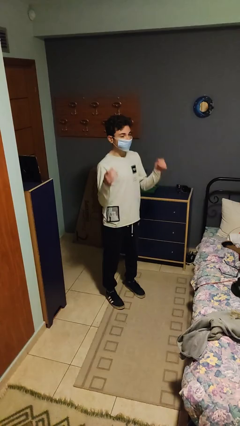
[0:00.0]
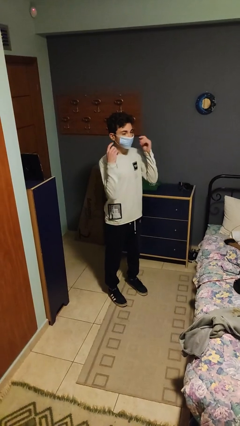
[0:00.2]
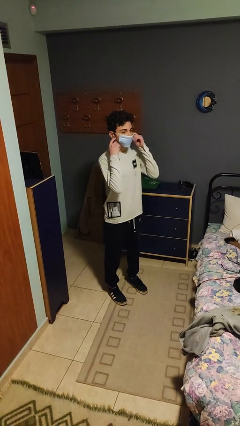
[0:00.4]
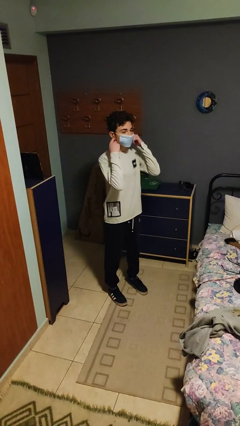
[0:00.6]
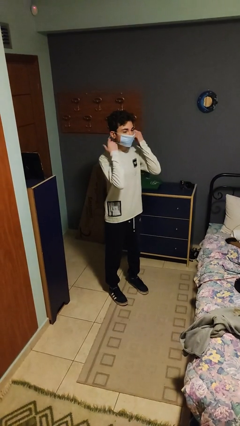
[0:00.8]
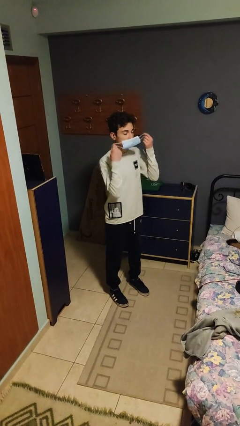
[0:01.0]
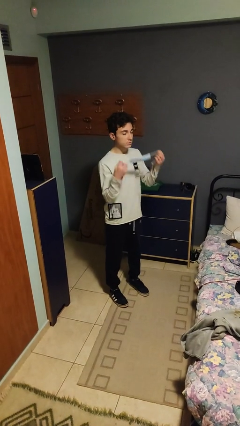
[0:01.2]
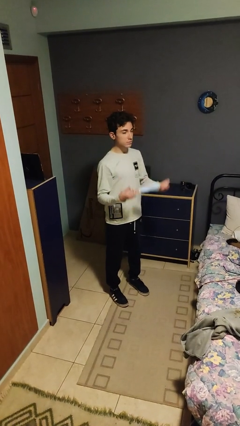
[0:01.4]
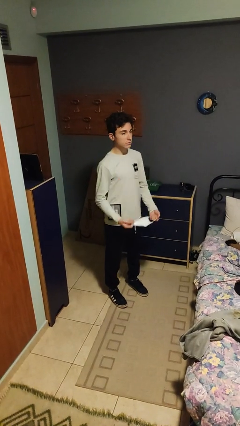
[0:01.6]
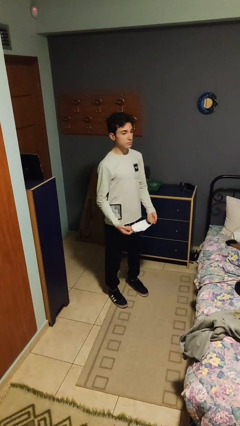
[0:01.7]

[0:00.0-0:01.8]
person takes off facemask

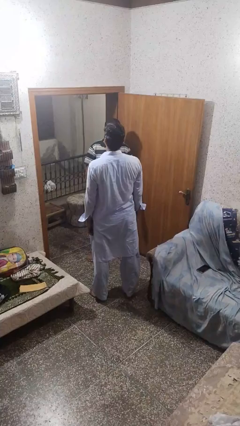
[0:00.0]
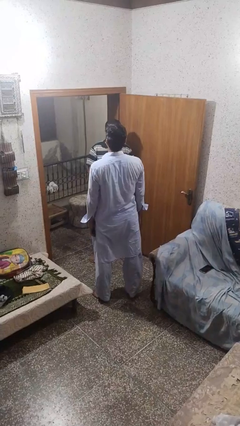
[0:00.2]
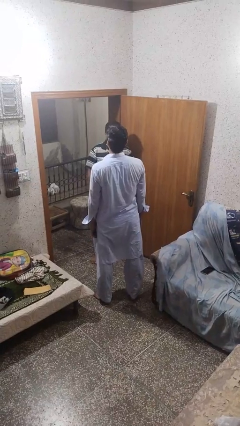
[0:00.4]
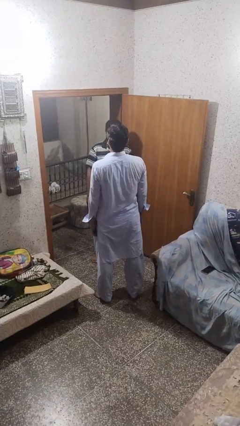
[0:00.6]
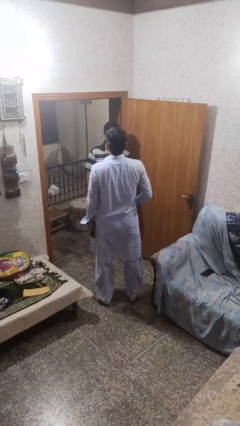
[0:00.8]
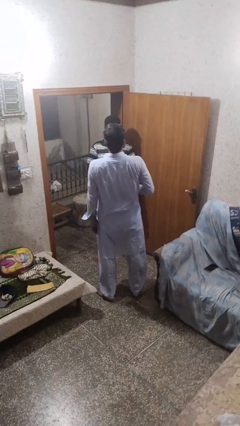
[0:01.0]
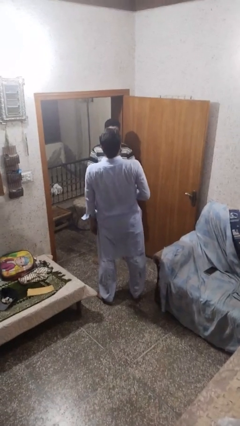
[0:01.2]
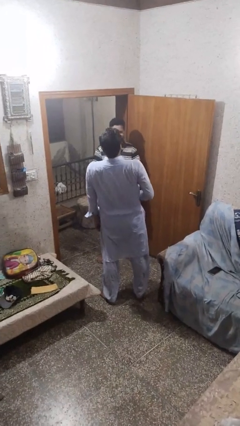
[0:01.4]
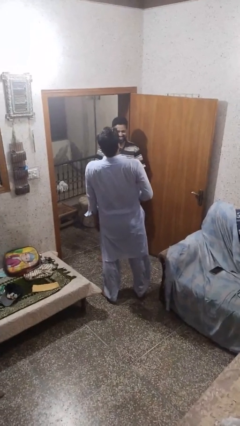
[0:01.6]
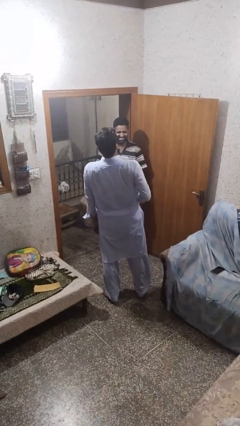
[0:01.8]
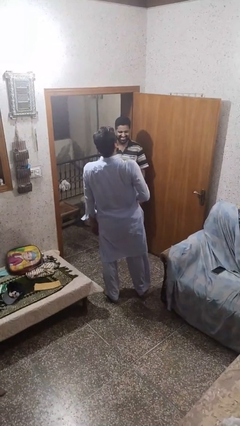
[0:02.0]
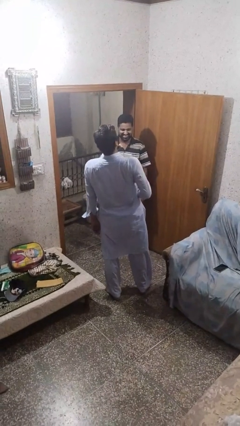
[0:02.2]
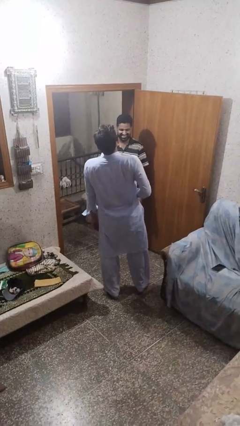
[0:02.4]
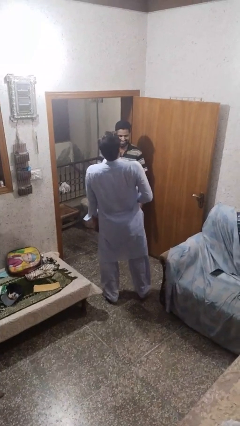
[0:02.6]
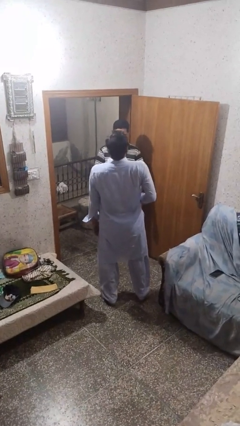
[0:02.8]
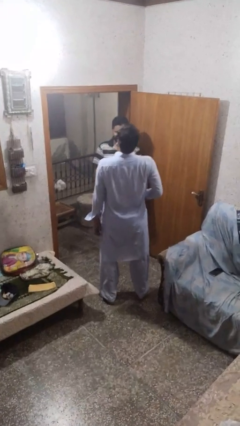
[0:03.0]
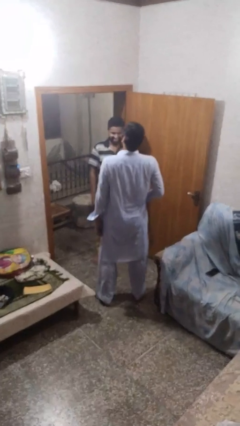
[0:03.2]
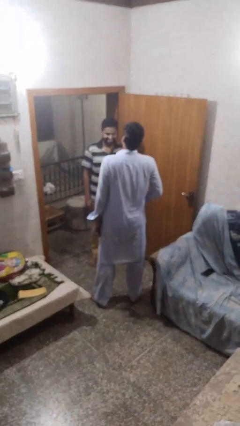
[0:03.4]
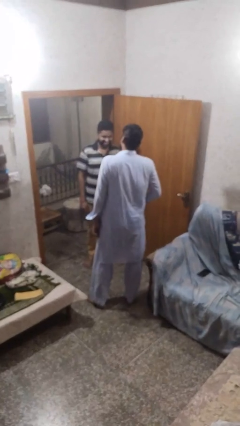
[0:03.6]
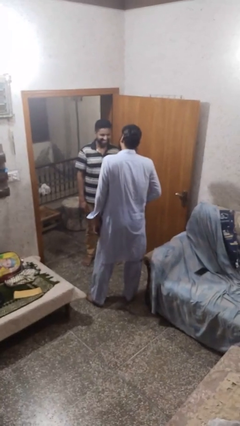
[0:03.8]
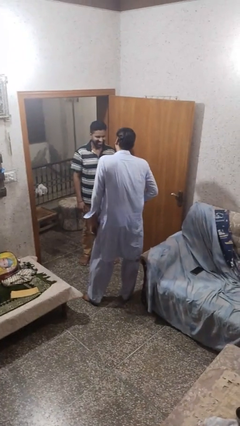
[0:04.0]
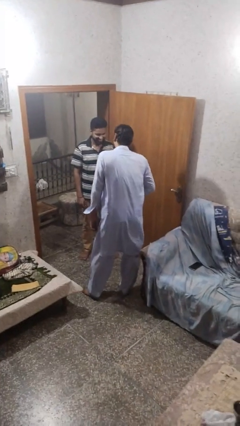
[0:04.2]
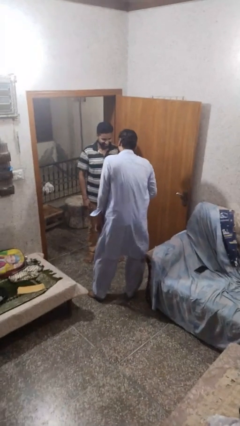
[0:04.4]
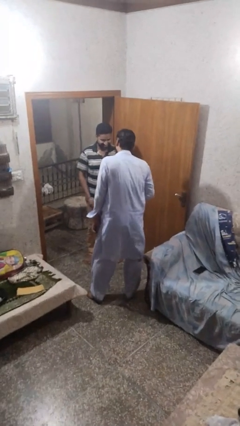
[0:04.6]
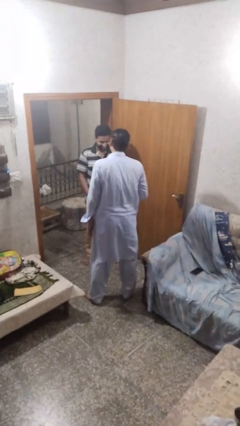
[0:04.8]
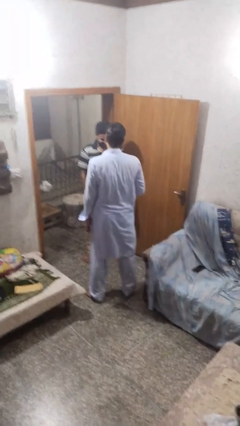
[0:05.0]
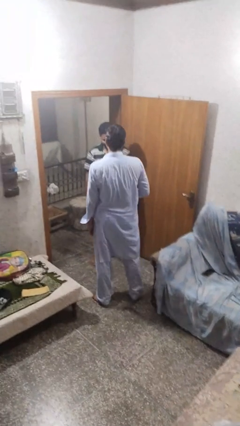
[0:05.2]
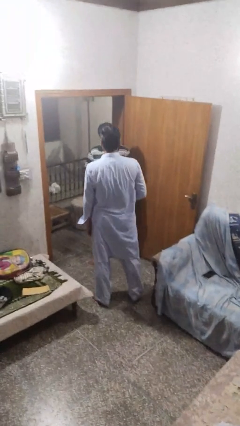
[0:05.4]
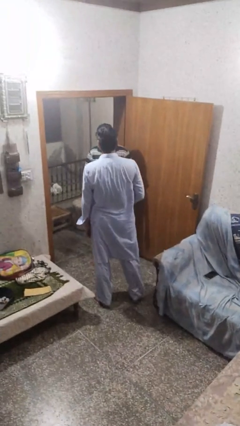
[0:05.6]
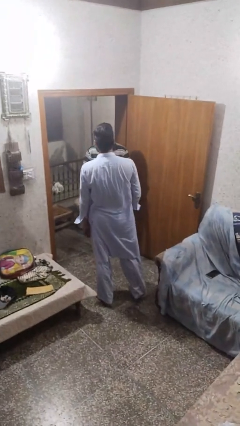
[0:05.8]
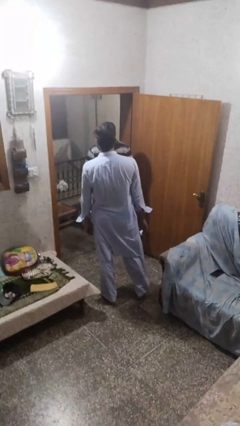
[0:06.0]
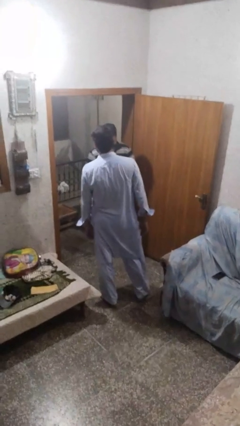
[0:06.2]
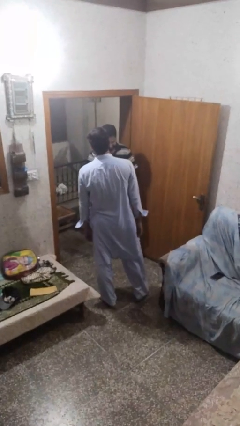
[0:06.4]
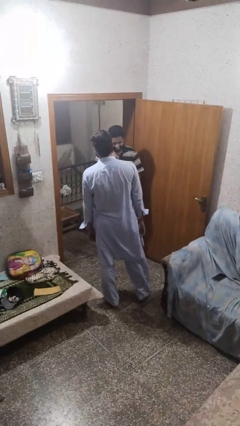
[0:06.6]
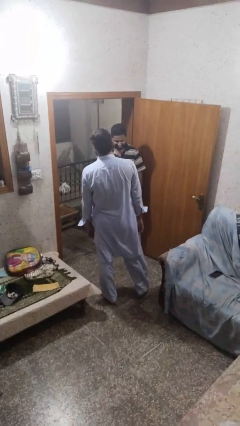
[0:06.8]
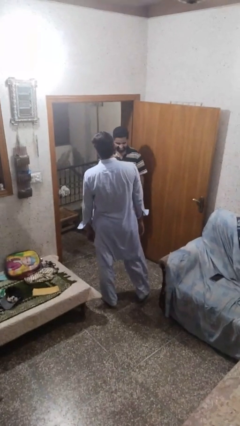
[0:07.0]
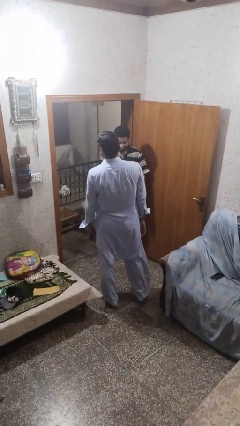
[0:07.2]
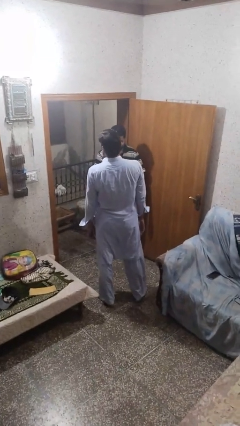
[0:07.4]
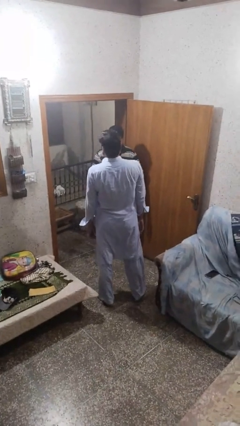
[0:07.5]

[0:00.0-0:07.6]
person laughs with person

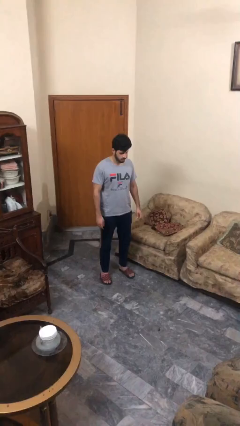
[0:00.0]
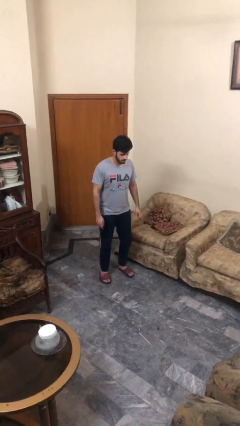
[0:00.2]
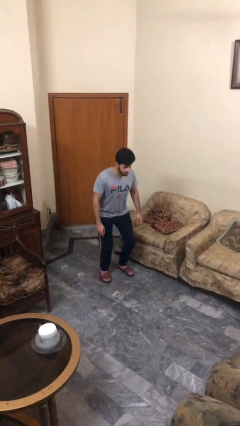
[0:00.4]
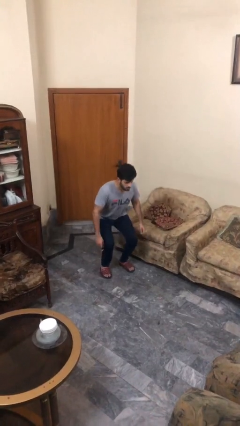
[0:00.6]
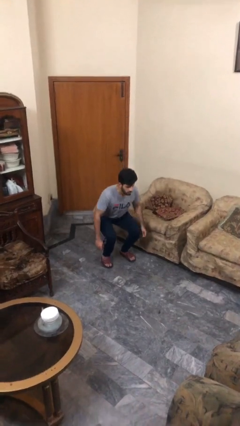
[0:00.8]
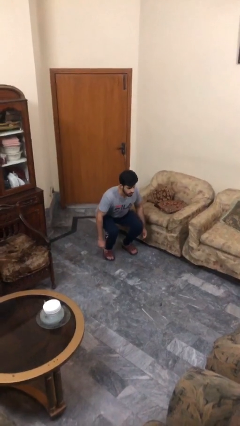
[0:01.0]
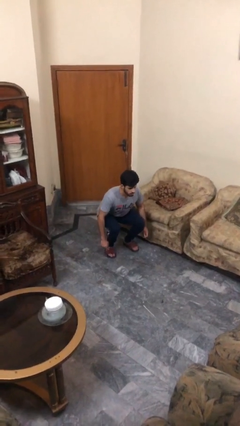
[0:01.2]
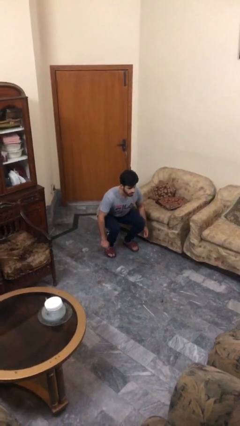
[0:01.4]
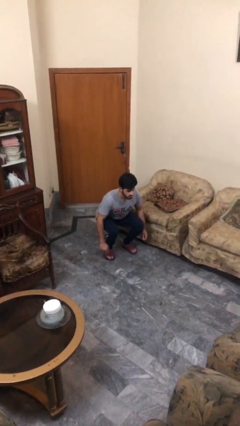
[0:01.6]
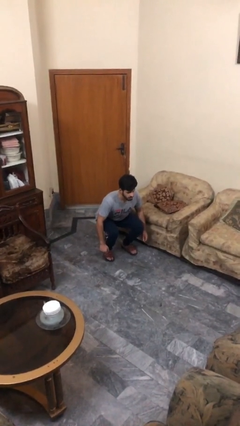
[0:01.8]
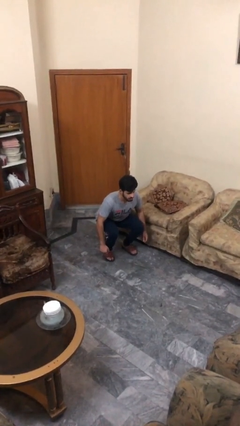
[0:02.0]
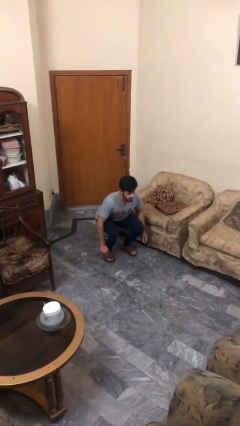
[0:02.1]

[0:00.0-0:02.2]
person squats

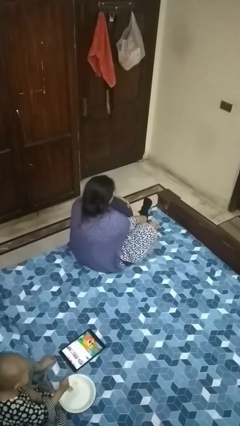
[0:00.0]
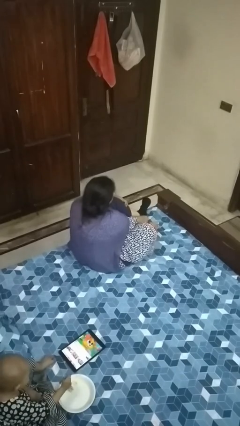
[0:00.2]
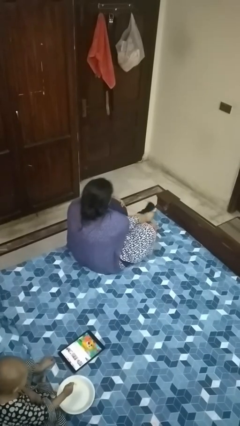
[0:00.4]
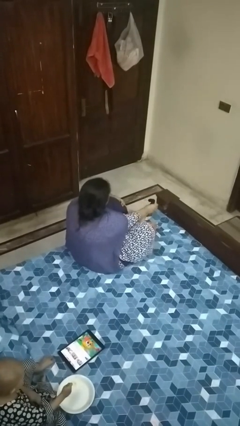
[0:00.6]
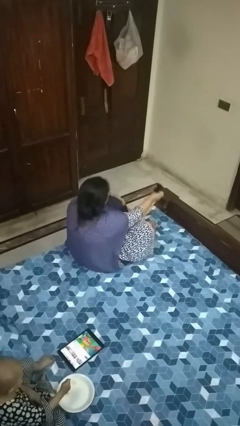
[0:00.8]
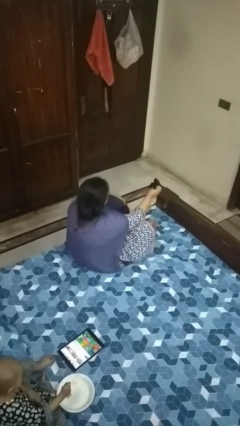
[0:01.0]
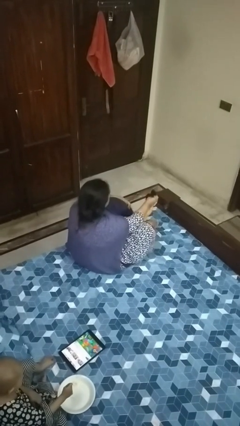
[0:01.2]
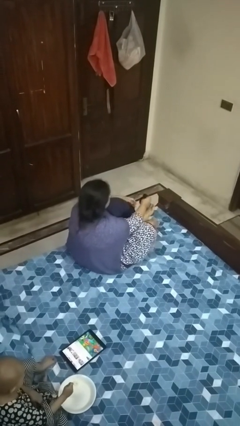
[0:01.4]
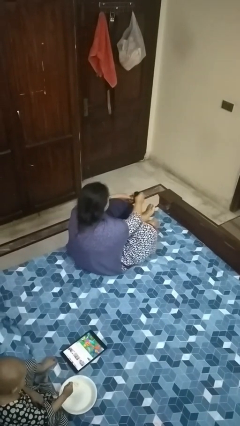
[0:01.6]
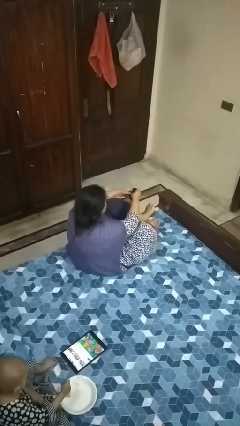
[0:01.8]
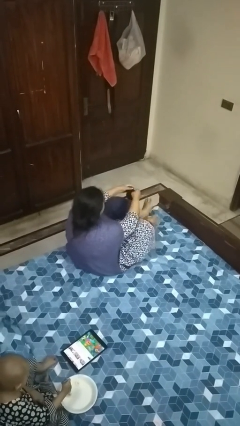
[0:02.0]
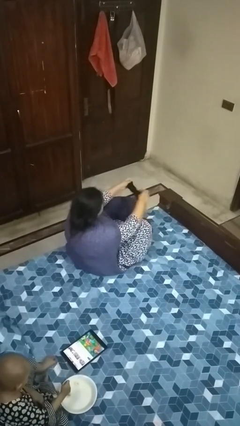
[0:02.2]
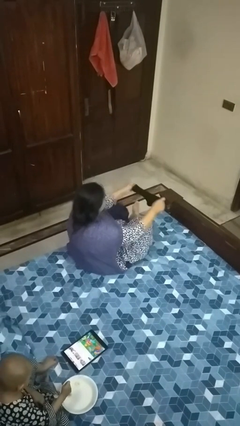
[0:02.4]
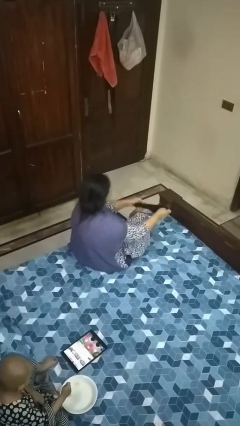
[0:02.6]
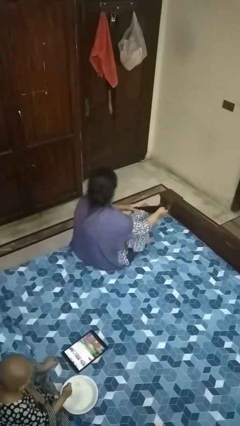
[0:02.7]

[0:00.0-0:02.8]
person takes off socks

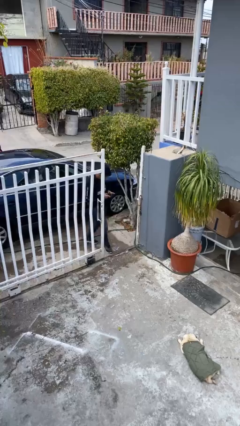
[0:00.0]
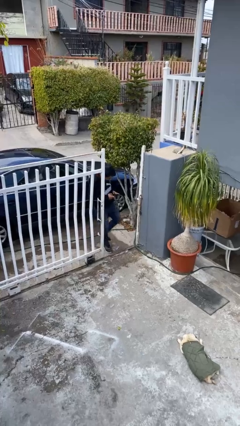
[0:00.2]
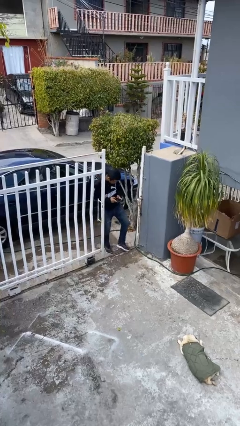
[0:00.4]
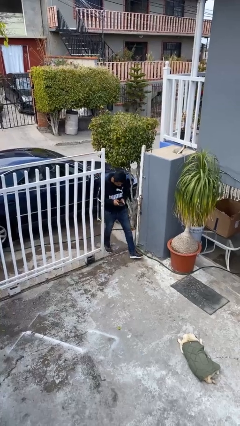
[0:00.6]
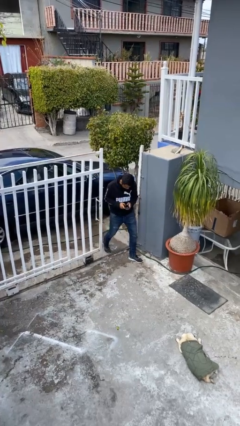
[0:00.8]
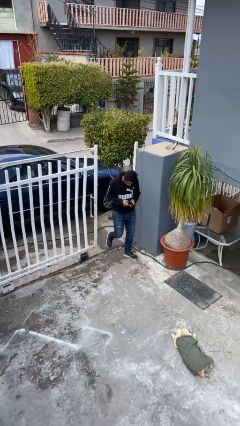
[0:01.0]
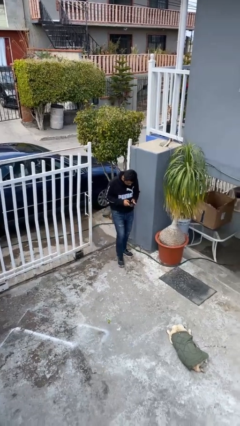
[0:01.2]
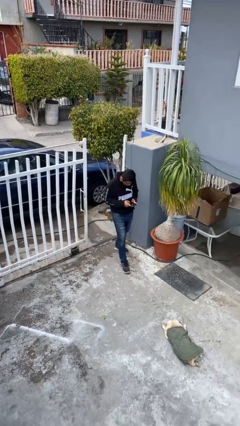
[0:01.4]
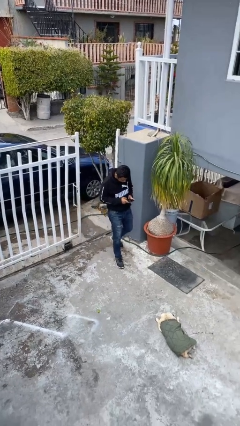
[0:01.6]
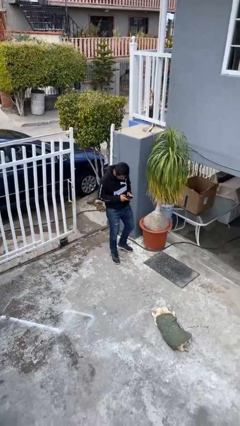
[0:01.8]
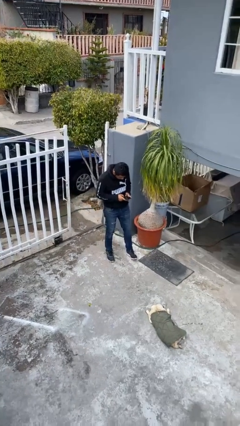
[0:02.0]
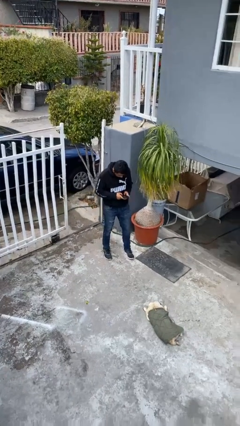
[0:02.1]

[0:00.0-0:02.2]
person enters scene through structure

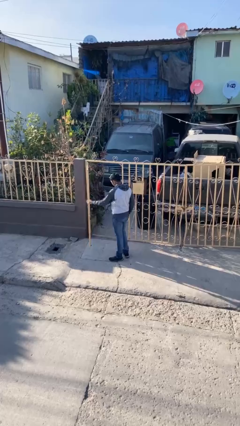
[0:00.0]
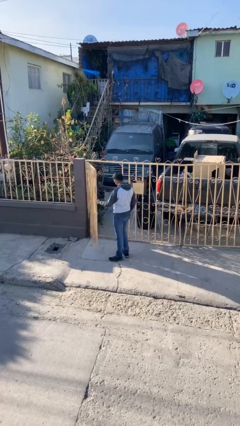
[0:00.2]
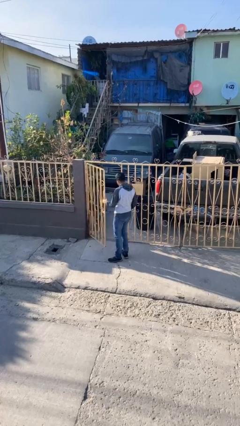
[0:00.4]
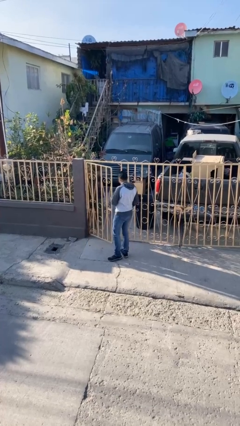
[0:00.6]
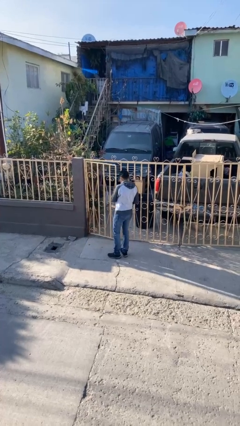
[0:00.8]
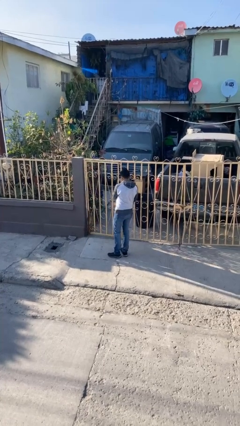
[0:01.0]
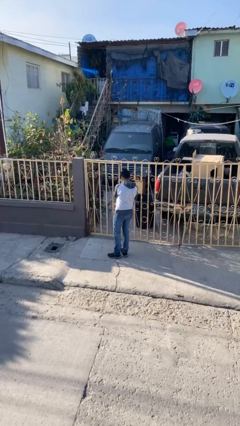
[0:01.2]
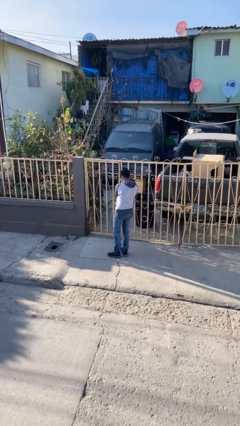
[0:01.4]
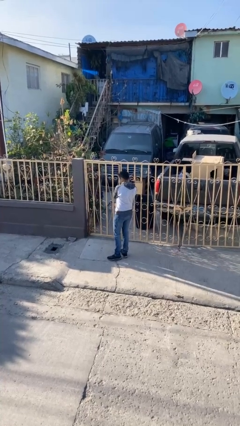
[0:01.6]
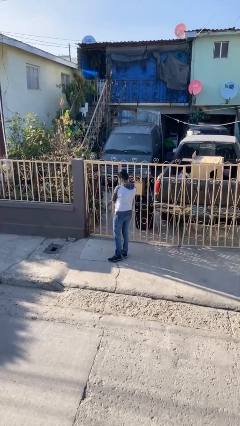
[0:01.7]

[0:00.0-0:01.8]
person closes facility door
